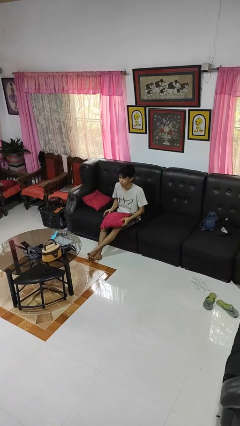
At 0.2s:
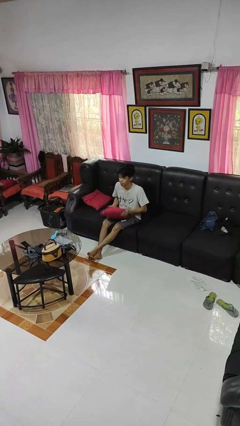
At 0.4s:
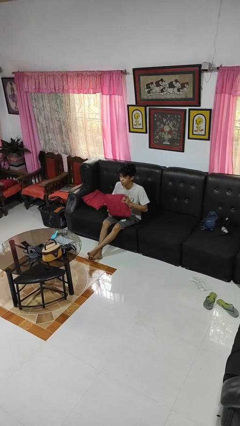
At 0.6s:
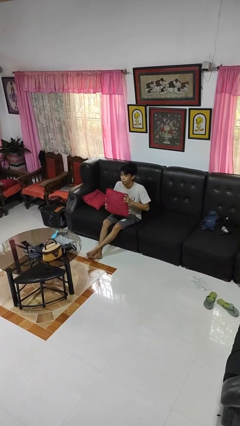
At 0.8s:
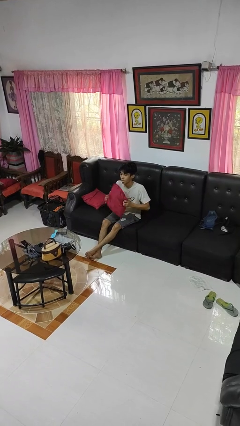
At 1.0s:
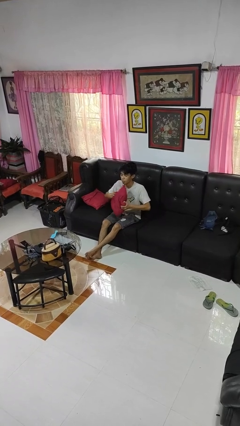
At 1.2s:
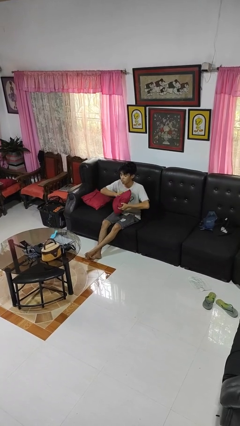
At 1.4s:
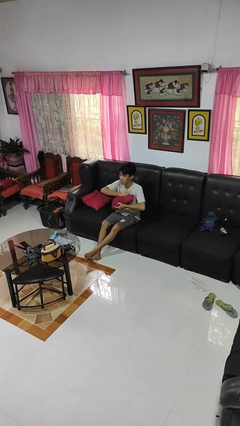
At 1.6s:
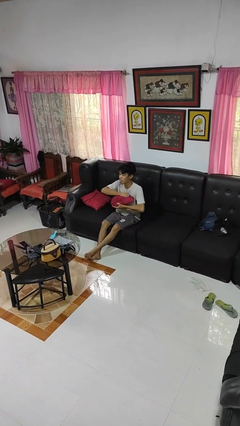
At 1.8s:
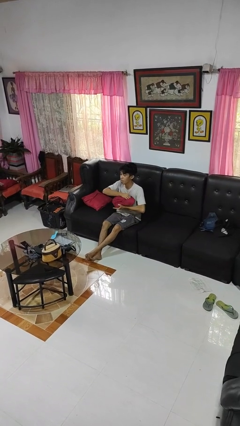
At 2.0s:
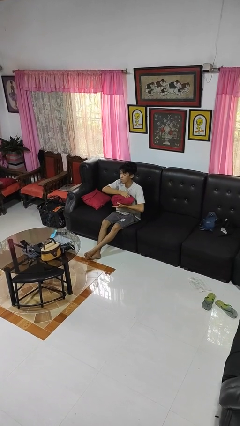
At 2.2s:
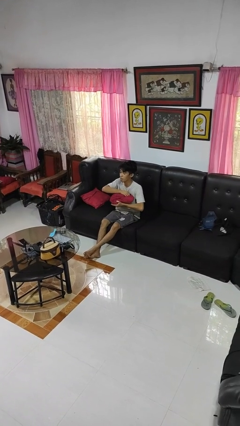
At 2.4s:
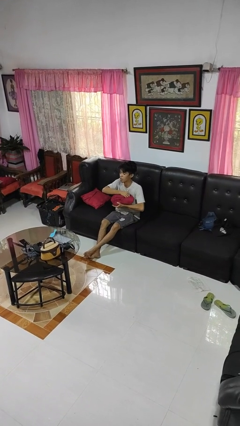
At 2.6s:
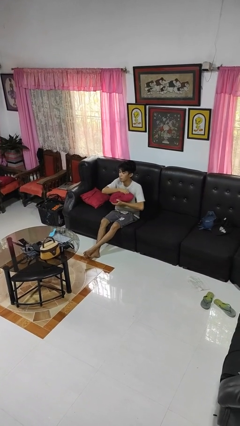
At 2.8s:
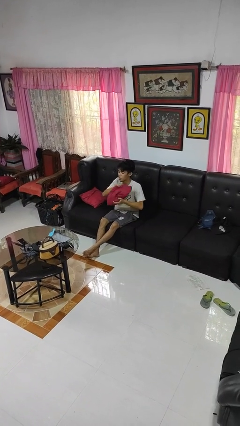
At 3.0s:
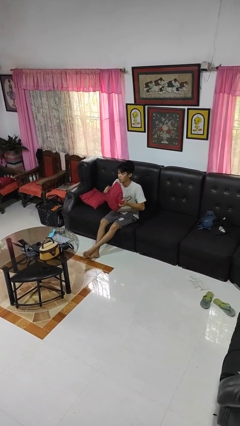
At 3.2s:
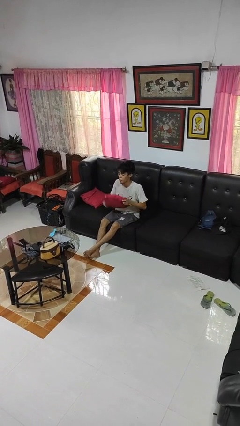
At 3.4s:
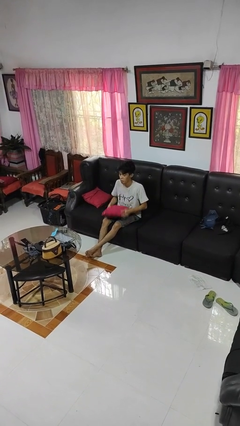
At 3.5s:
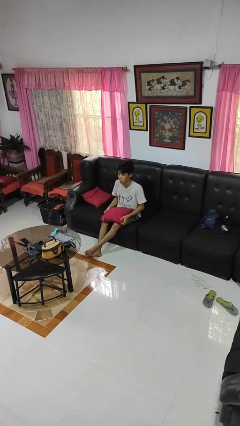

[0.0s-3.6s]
person squeezes object

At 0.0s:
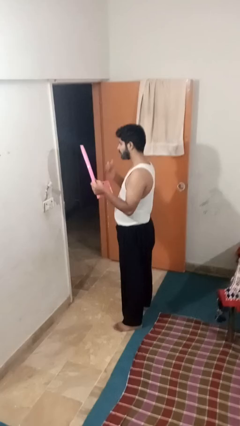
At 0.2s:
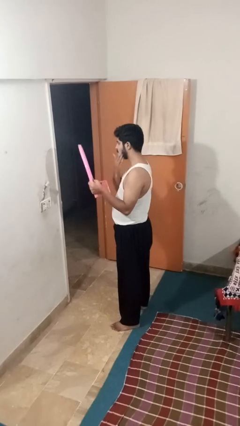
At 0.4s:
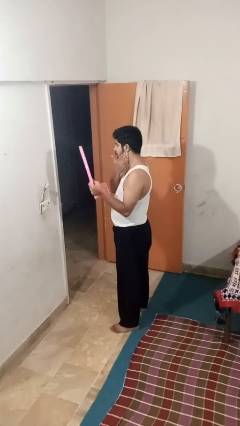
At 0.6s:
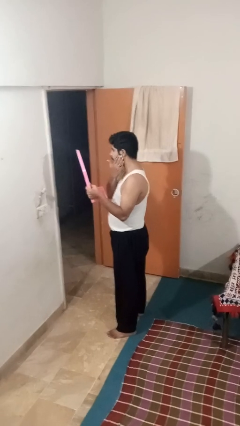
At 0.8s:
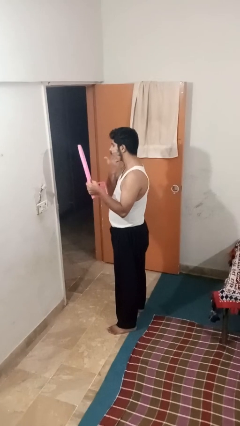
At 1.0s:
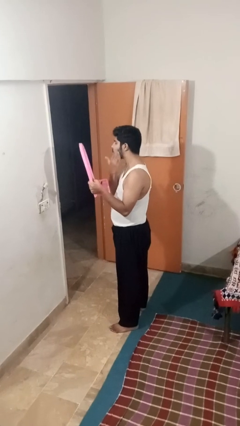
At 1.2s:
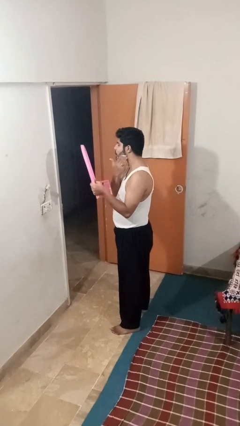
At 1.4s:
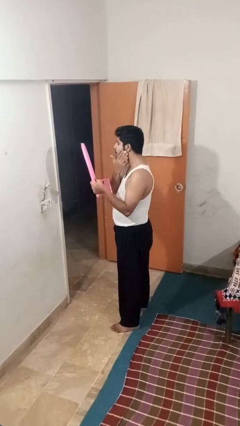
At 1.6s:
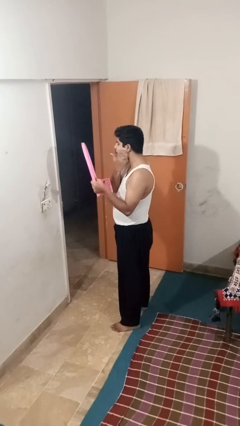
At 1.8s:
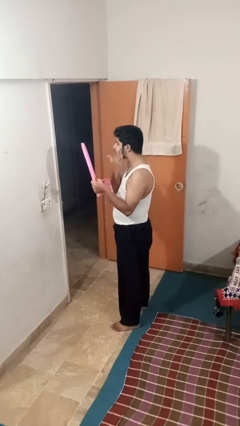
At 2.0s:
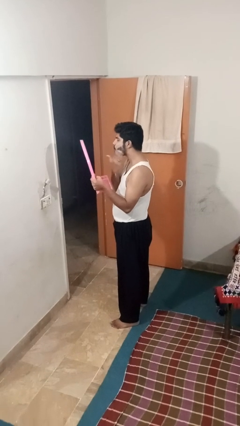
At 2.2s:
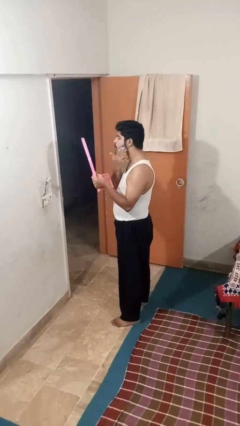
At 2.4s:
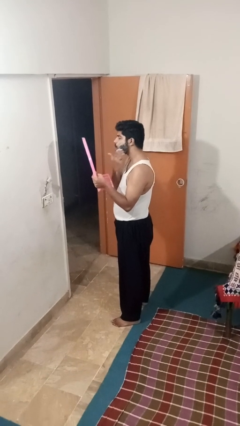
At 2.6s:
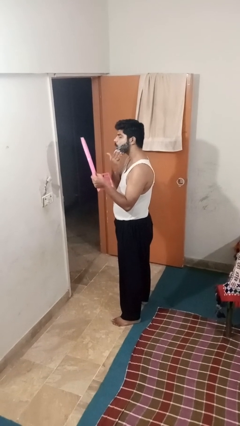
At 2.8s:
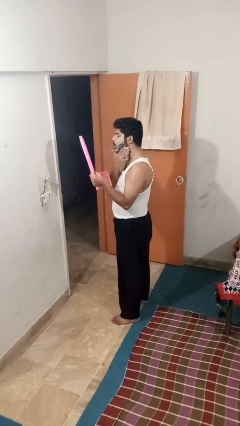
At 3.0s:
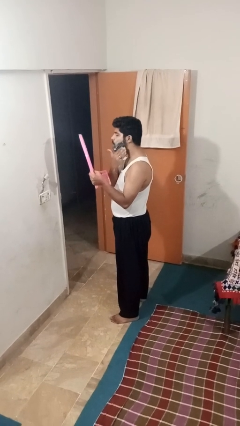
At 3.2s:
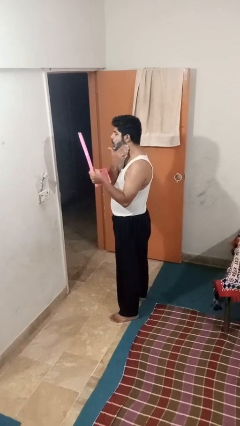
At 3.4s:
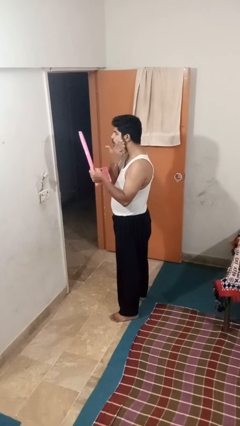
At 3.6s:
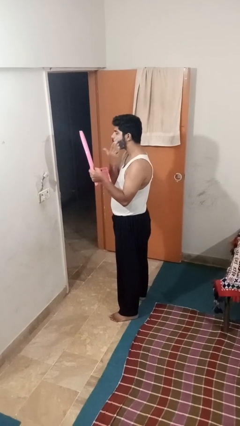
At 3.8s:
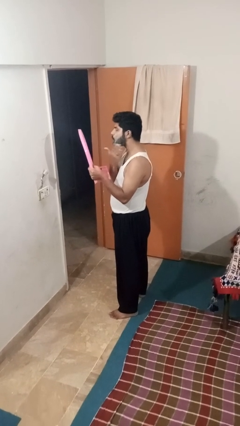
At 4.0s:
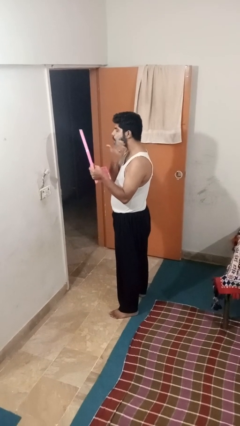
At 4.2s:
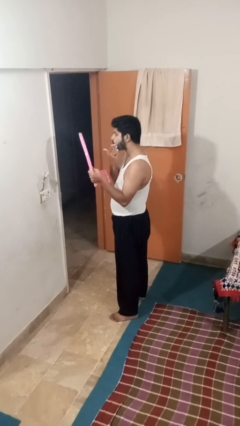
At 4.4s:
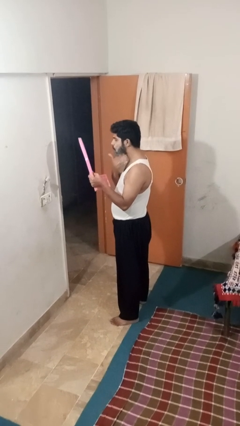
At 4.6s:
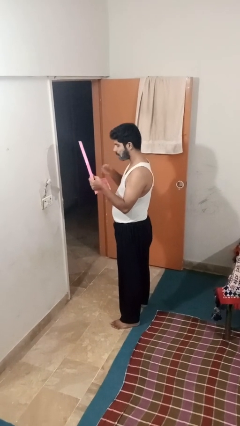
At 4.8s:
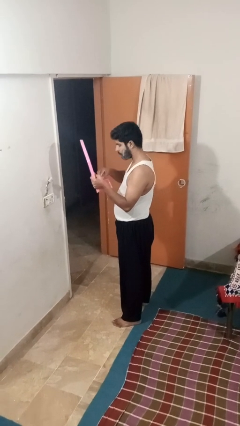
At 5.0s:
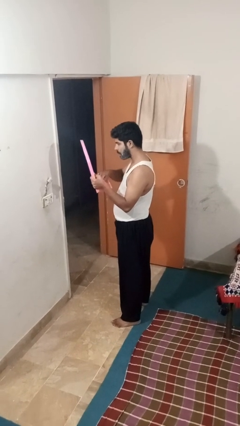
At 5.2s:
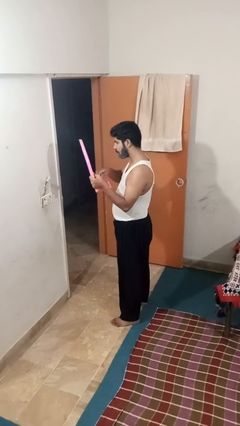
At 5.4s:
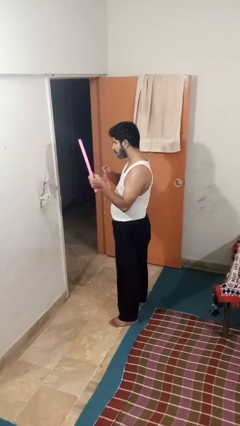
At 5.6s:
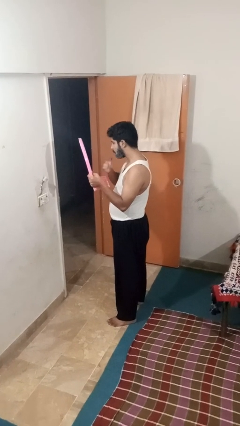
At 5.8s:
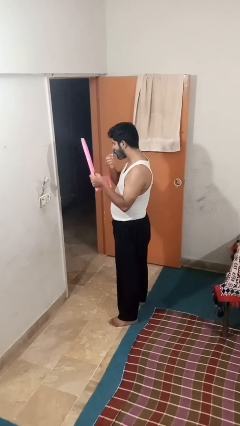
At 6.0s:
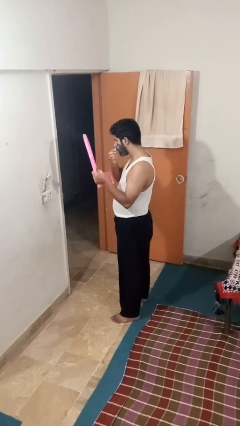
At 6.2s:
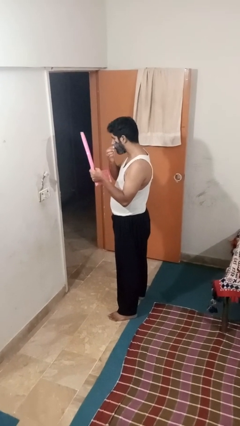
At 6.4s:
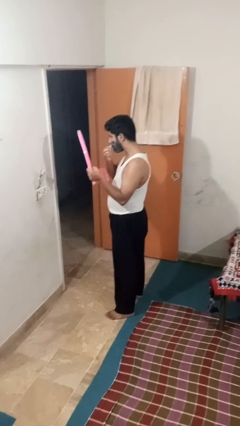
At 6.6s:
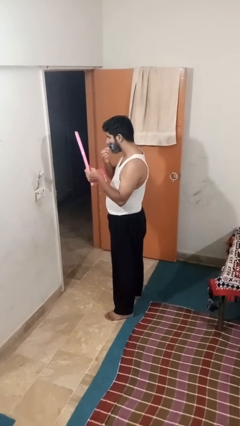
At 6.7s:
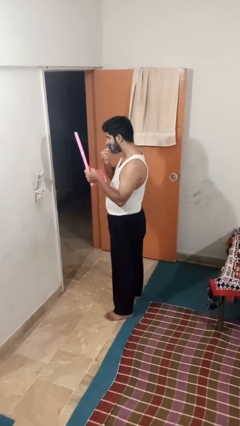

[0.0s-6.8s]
person applies shaving cream

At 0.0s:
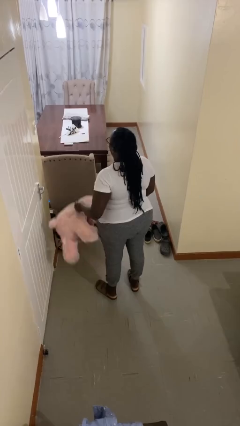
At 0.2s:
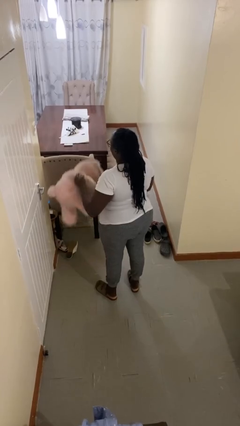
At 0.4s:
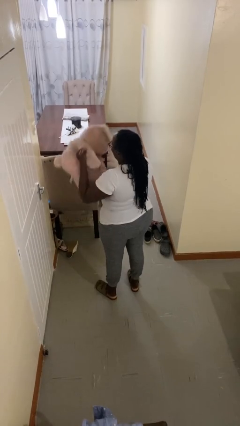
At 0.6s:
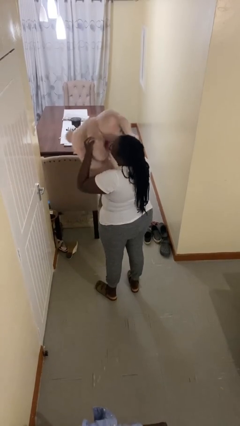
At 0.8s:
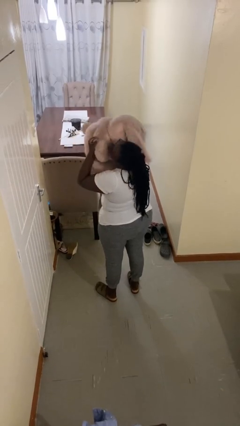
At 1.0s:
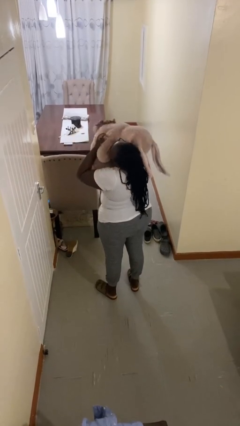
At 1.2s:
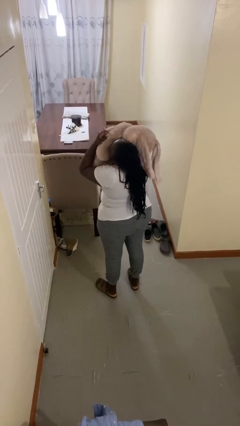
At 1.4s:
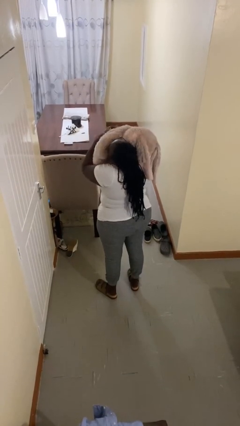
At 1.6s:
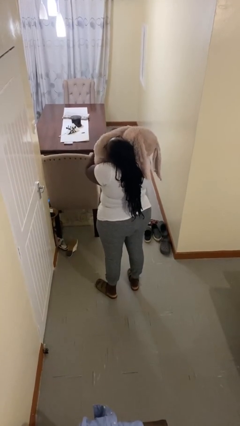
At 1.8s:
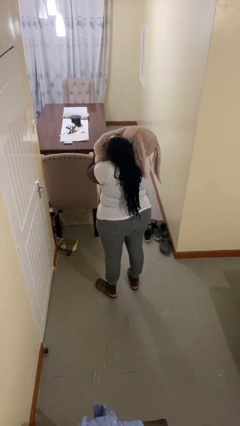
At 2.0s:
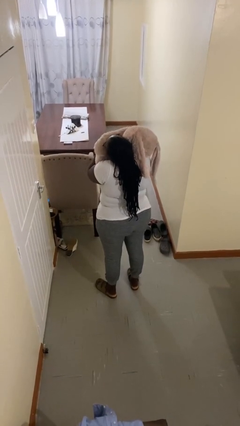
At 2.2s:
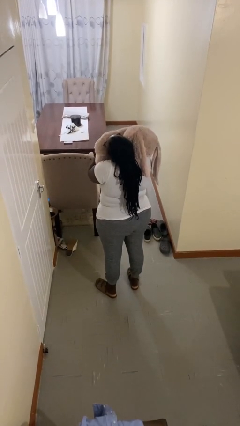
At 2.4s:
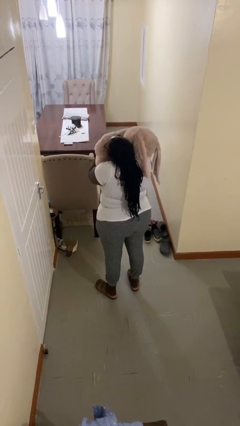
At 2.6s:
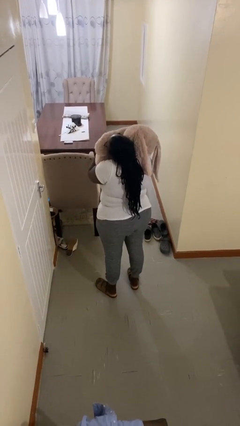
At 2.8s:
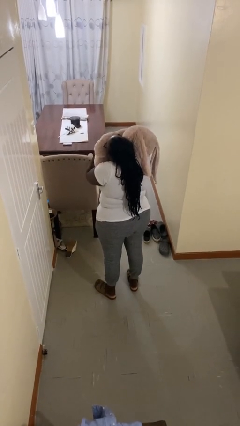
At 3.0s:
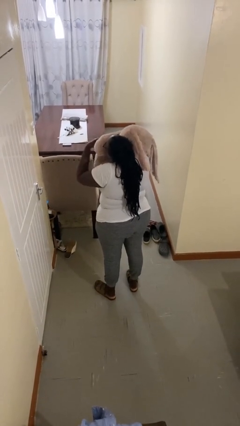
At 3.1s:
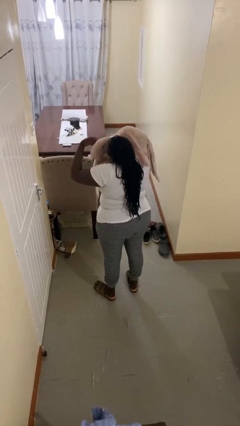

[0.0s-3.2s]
person hugs stuffed animal

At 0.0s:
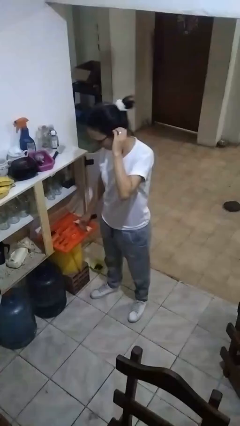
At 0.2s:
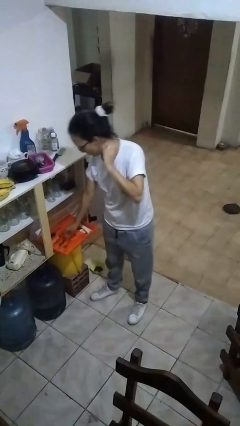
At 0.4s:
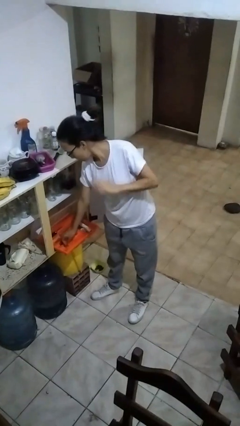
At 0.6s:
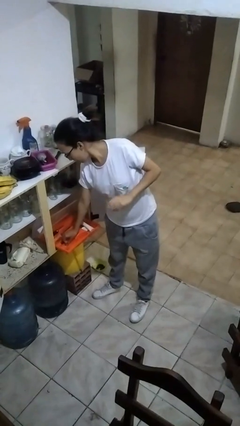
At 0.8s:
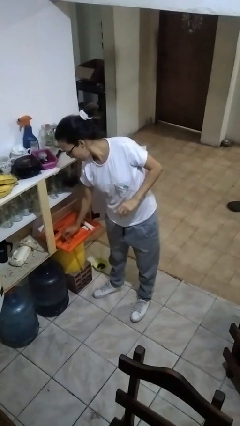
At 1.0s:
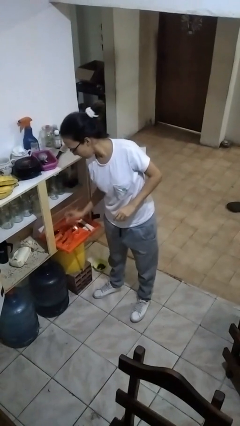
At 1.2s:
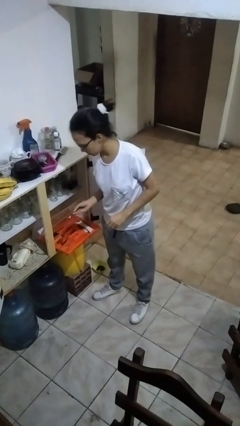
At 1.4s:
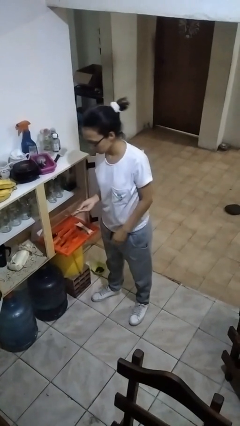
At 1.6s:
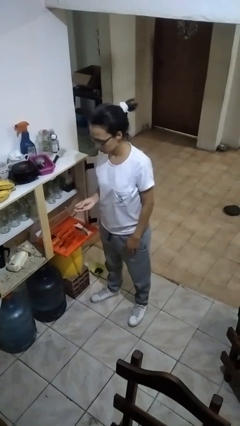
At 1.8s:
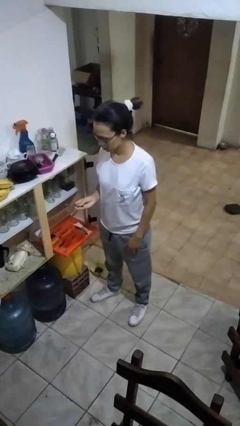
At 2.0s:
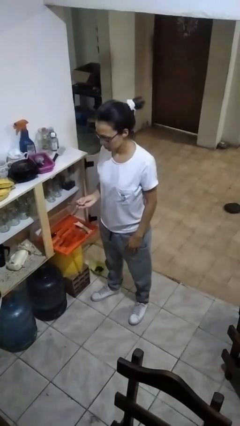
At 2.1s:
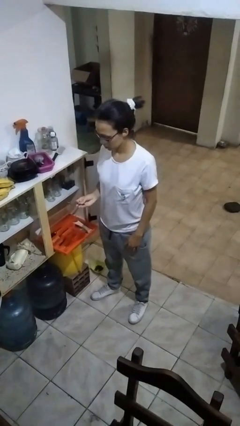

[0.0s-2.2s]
person takes object from kitchen drawer

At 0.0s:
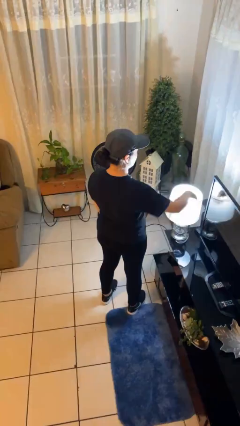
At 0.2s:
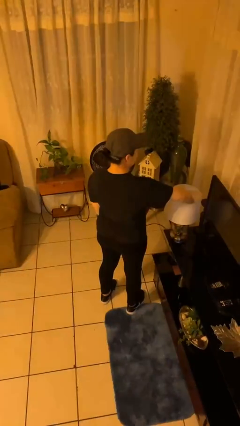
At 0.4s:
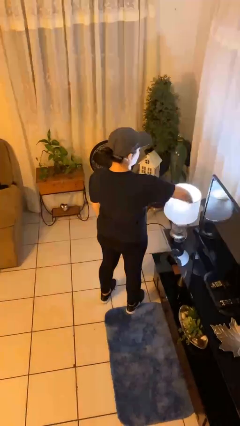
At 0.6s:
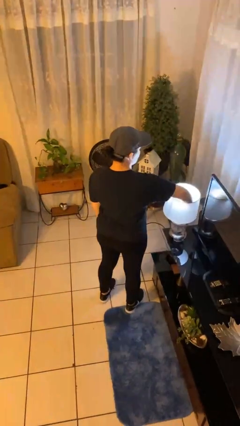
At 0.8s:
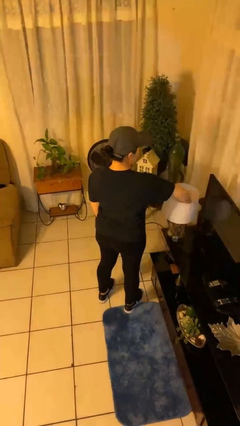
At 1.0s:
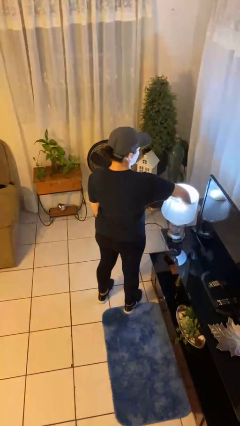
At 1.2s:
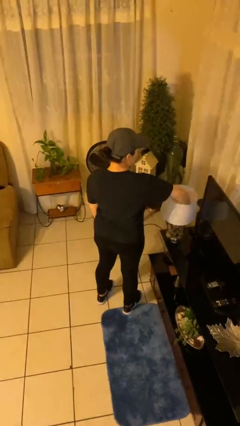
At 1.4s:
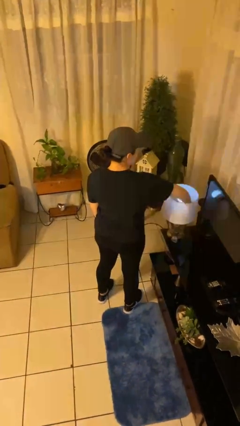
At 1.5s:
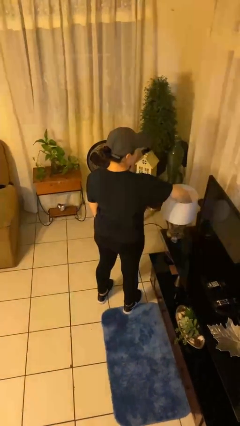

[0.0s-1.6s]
person turns off lamp

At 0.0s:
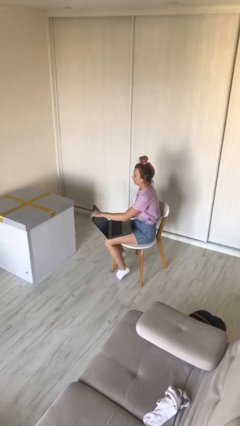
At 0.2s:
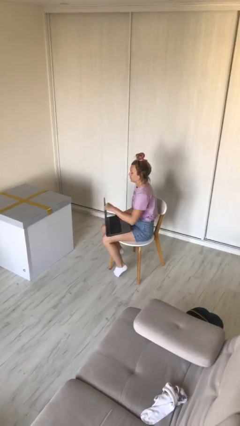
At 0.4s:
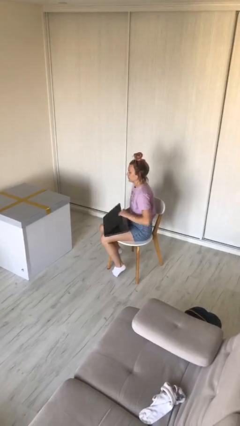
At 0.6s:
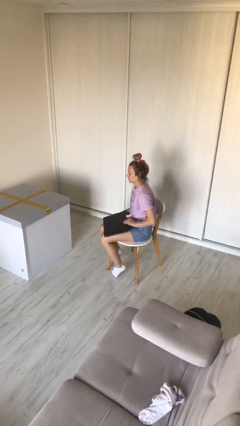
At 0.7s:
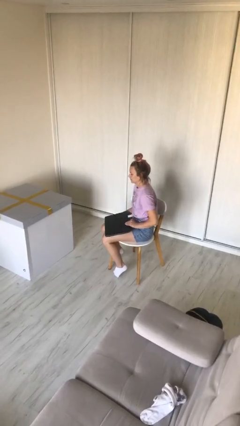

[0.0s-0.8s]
person closes laptop
